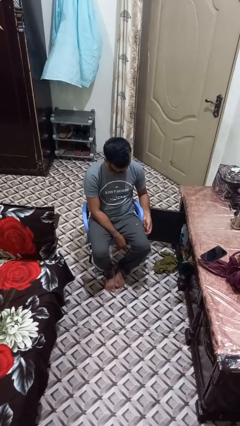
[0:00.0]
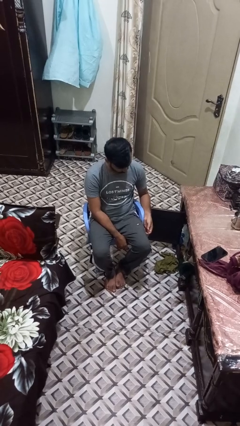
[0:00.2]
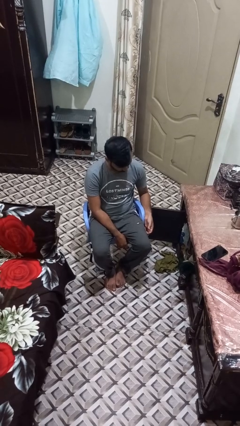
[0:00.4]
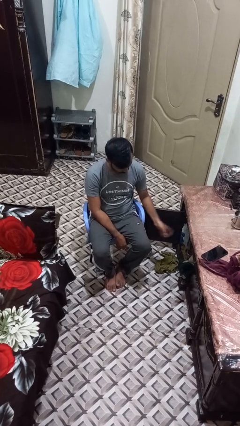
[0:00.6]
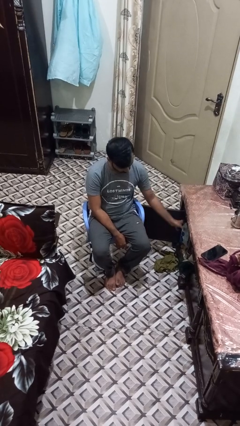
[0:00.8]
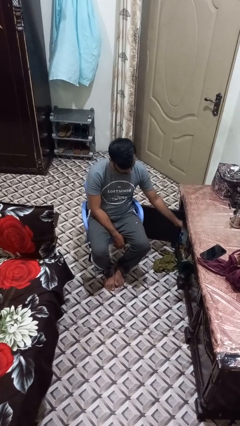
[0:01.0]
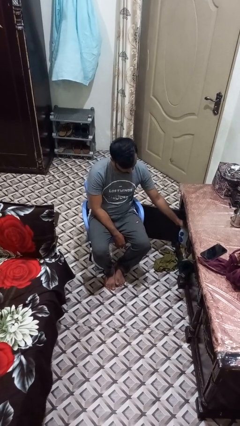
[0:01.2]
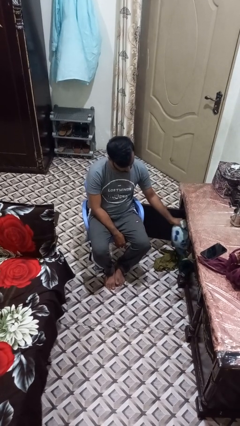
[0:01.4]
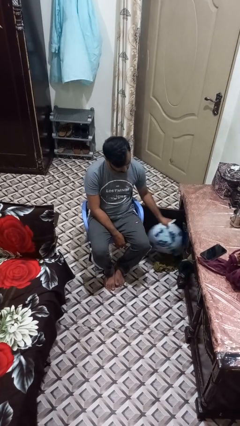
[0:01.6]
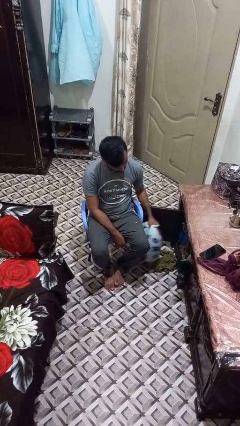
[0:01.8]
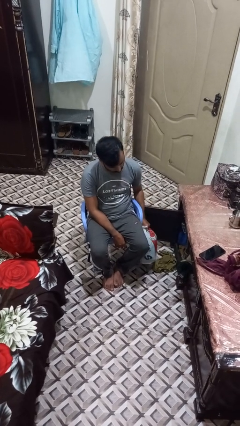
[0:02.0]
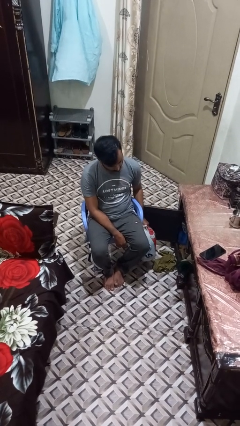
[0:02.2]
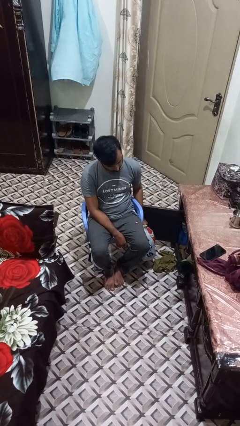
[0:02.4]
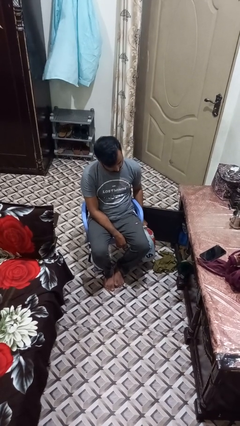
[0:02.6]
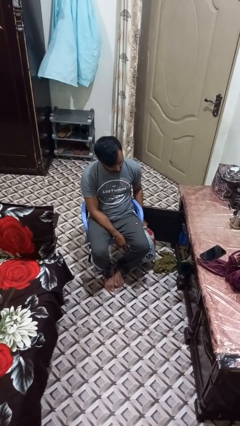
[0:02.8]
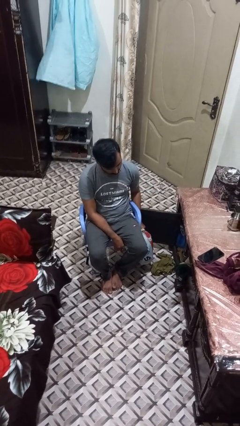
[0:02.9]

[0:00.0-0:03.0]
person picks up object from cabinet

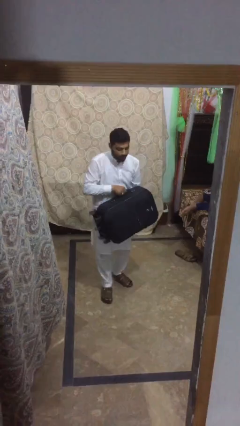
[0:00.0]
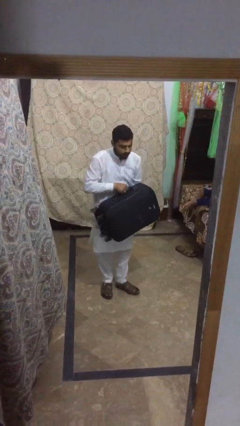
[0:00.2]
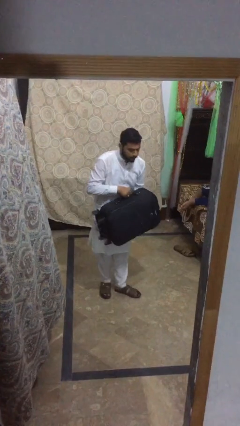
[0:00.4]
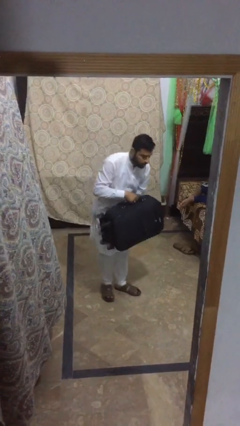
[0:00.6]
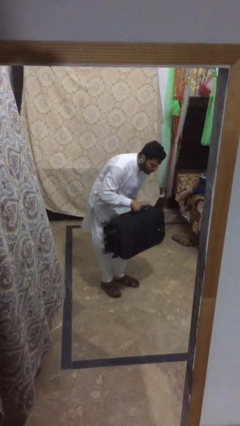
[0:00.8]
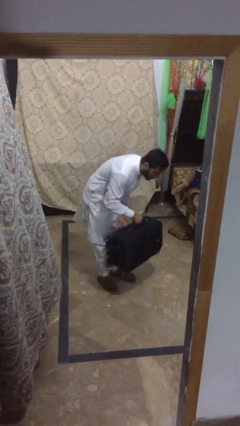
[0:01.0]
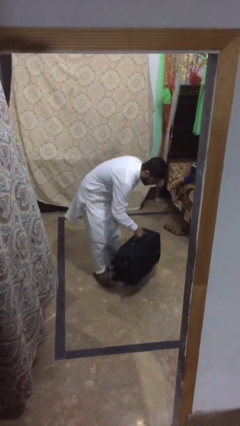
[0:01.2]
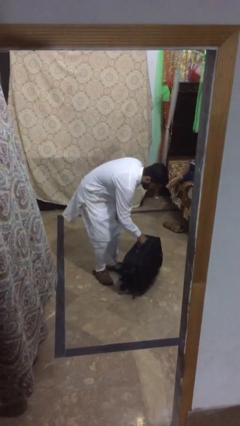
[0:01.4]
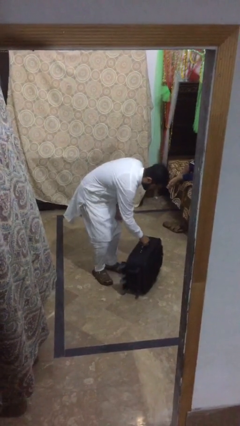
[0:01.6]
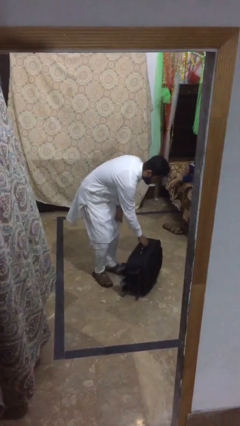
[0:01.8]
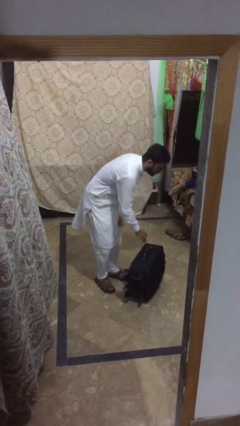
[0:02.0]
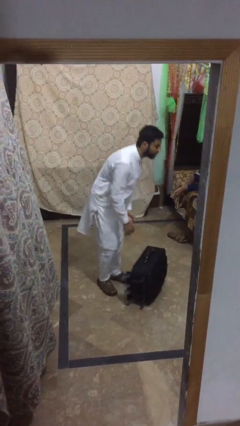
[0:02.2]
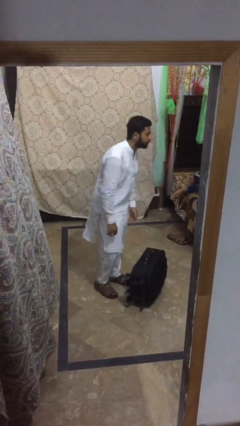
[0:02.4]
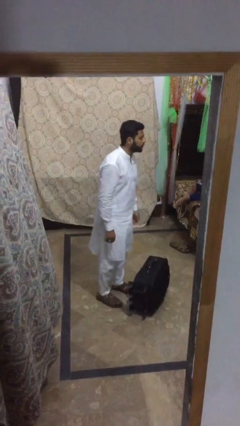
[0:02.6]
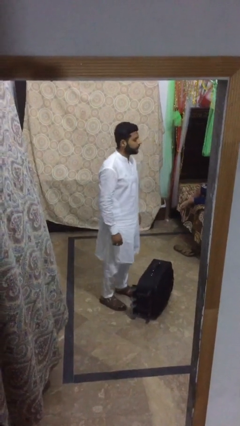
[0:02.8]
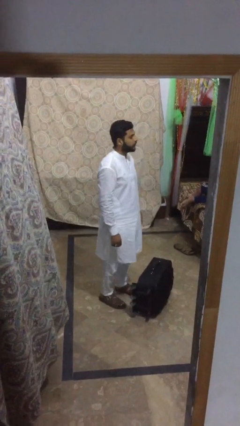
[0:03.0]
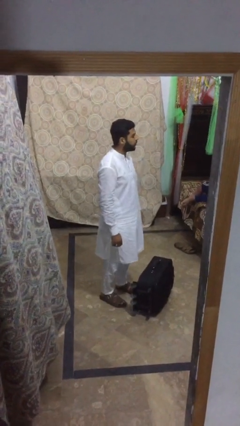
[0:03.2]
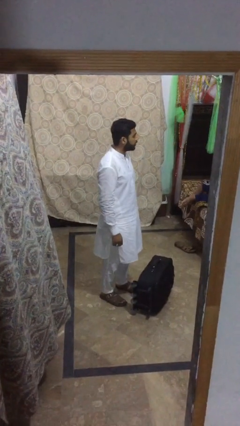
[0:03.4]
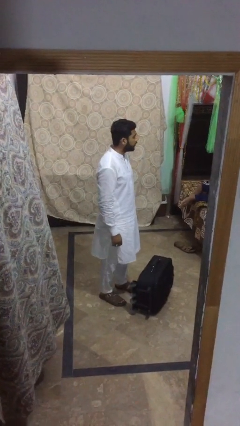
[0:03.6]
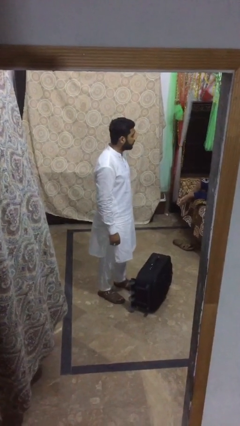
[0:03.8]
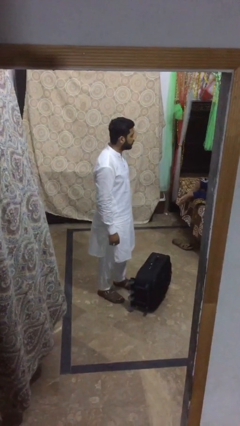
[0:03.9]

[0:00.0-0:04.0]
person puts down object on floor

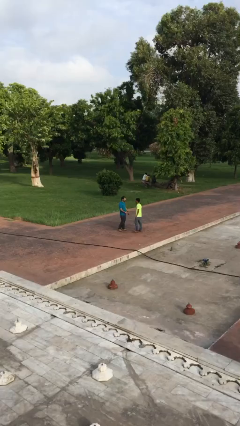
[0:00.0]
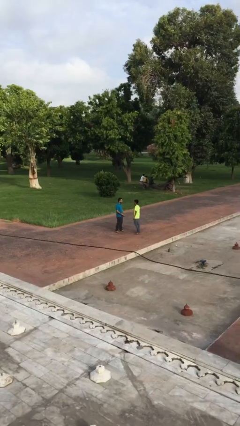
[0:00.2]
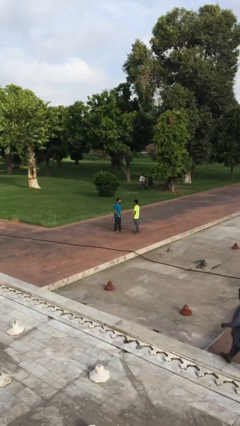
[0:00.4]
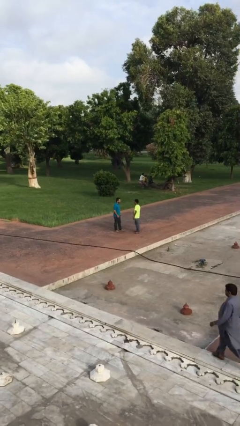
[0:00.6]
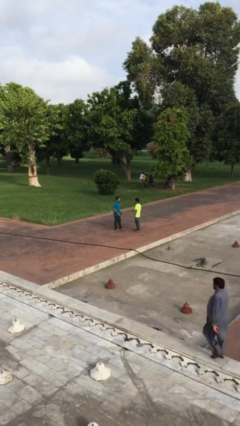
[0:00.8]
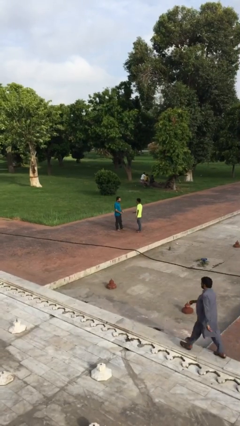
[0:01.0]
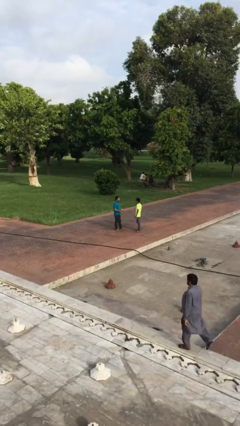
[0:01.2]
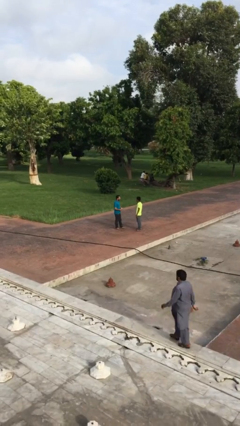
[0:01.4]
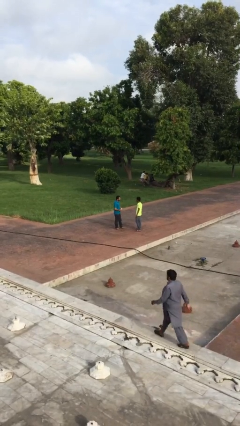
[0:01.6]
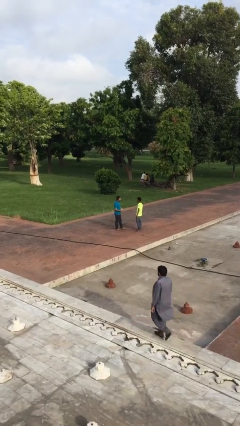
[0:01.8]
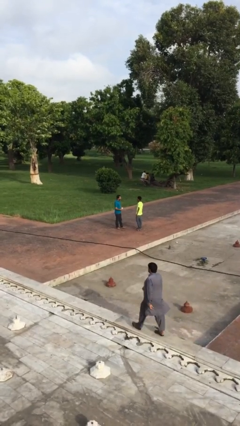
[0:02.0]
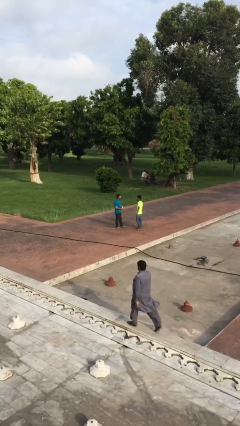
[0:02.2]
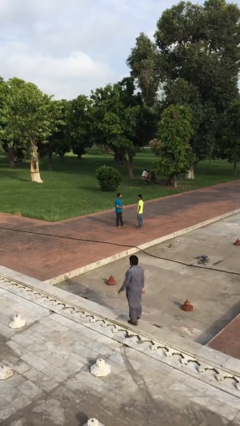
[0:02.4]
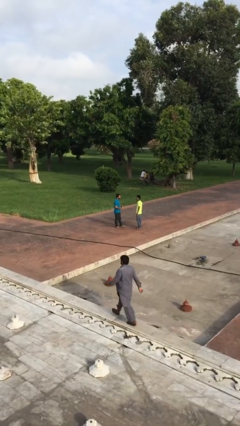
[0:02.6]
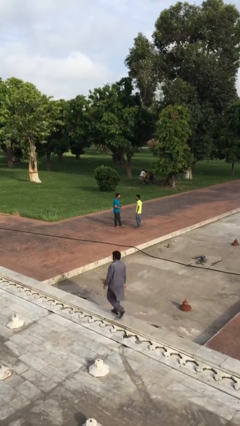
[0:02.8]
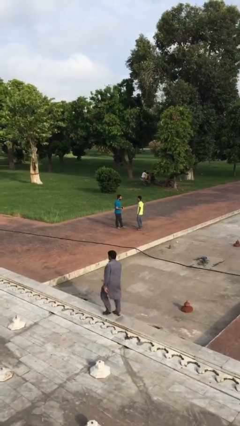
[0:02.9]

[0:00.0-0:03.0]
person talks to person

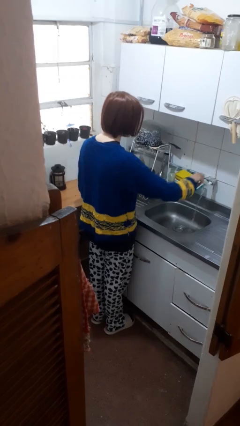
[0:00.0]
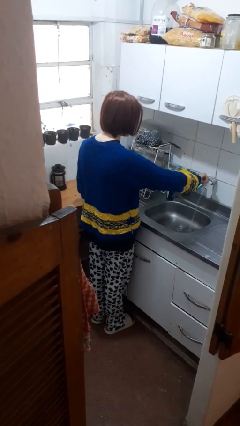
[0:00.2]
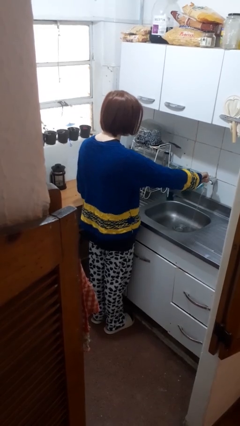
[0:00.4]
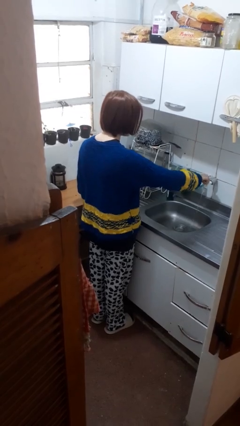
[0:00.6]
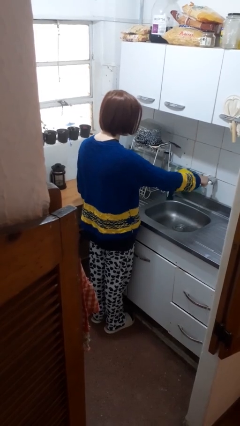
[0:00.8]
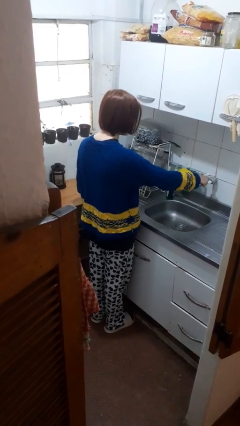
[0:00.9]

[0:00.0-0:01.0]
person turns off faucet

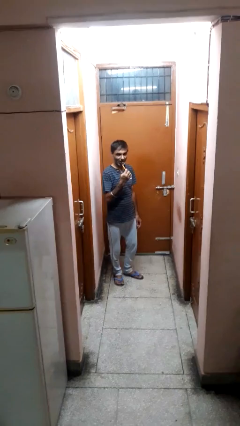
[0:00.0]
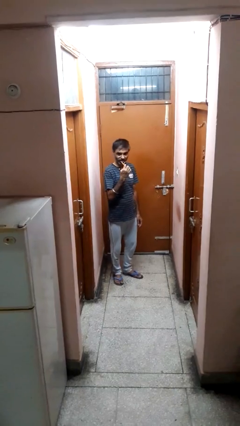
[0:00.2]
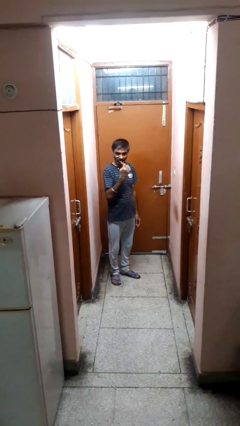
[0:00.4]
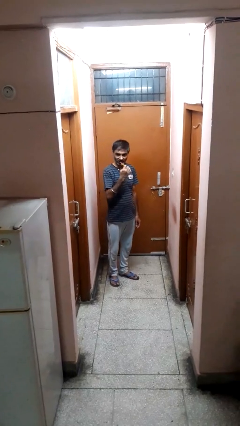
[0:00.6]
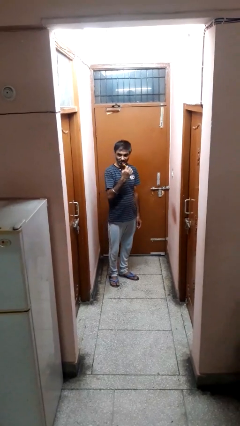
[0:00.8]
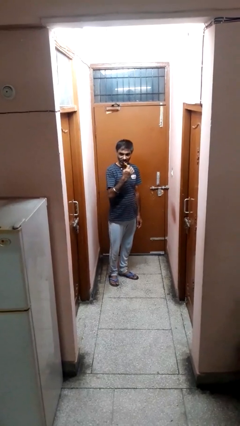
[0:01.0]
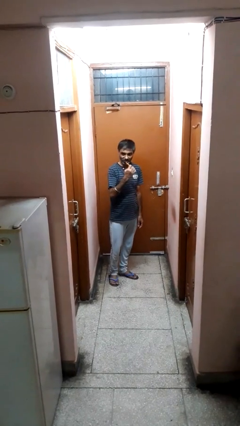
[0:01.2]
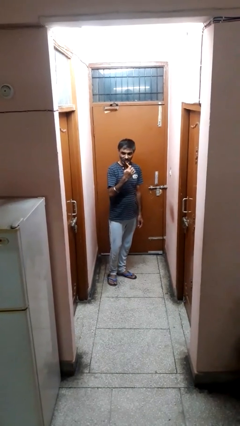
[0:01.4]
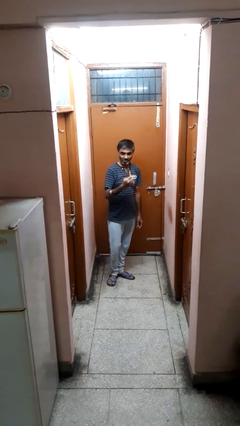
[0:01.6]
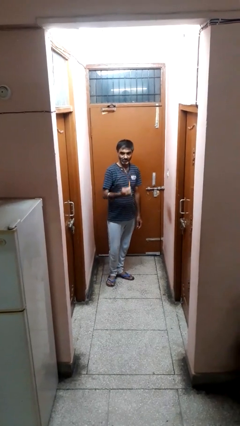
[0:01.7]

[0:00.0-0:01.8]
person brushes teeth

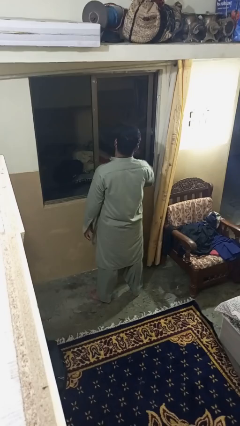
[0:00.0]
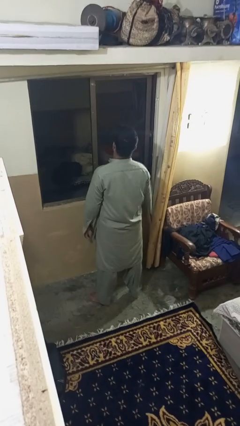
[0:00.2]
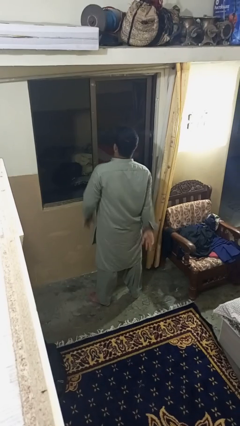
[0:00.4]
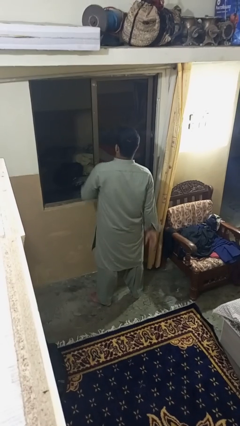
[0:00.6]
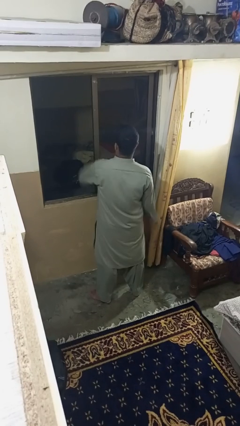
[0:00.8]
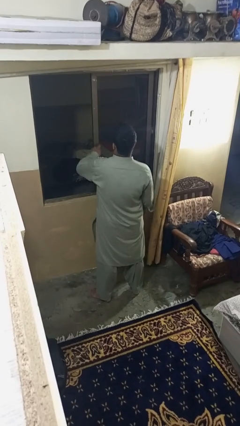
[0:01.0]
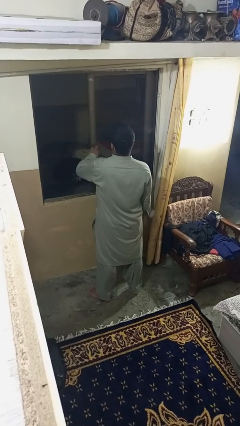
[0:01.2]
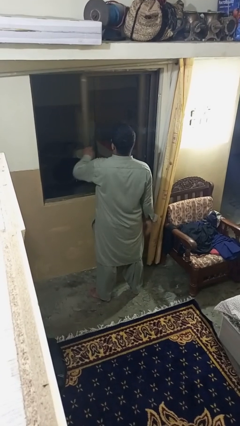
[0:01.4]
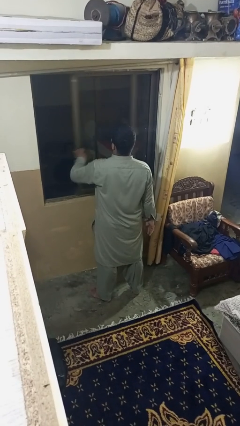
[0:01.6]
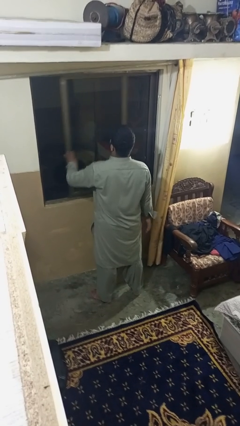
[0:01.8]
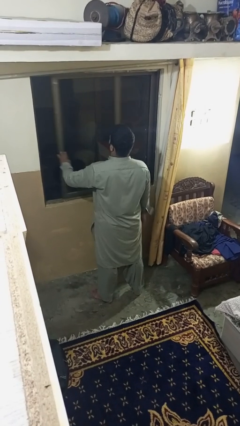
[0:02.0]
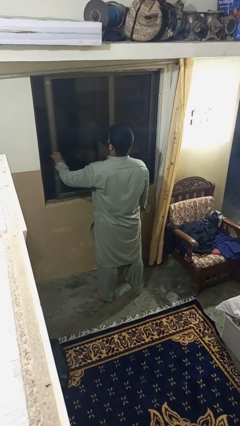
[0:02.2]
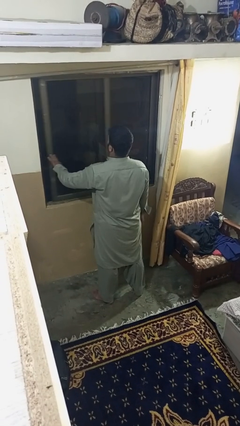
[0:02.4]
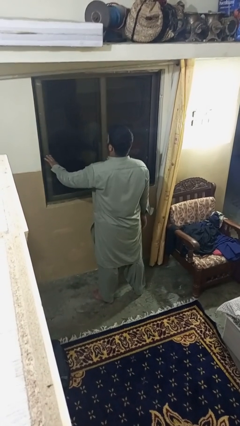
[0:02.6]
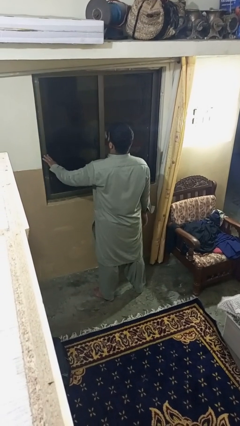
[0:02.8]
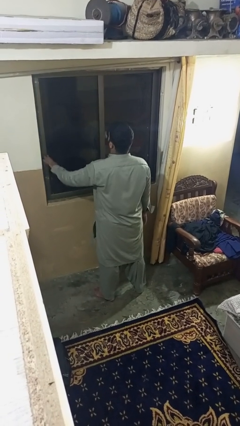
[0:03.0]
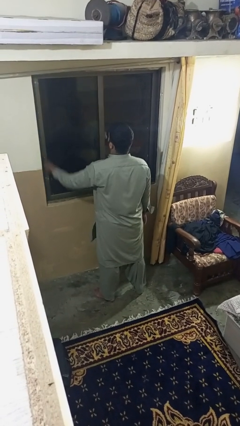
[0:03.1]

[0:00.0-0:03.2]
person closes home window

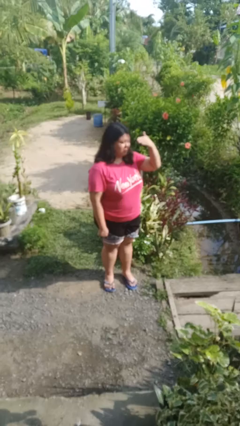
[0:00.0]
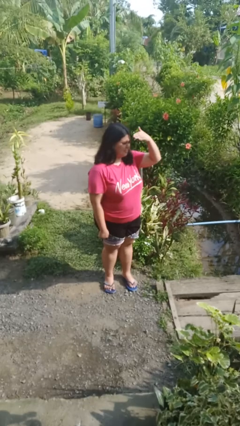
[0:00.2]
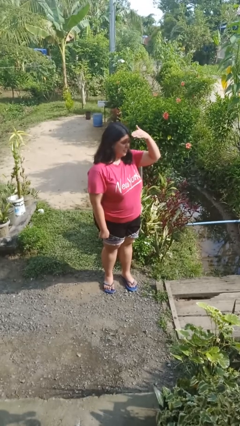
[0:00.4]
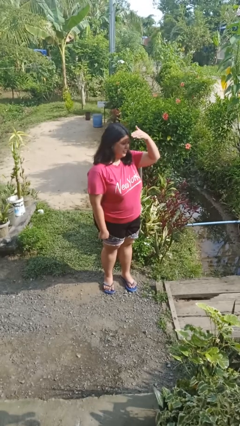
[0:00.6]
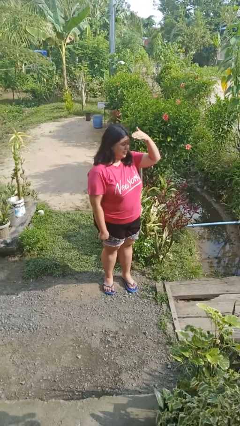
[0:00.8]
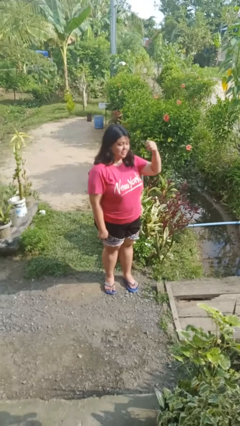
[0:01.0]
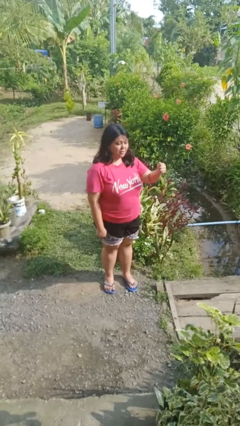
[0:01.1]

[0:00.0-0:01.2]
person shades eyes
